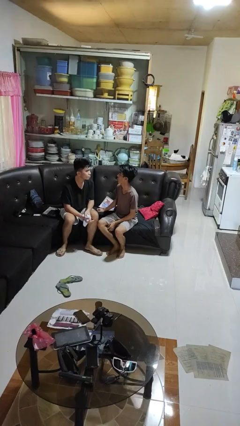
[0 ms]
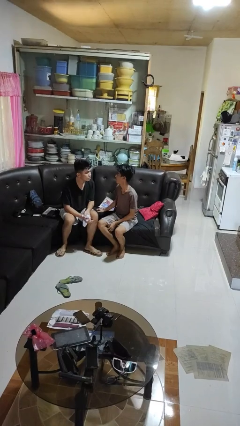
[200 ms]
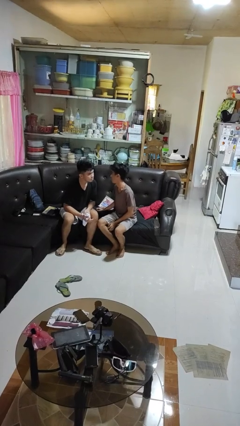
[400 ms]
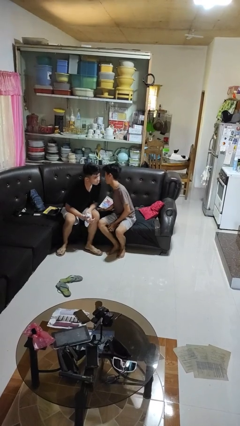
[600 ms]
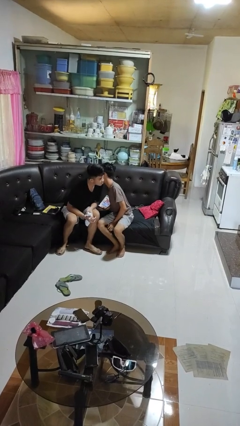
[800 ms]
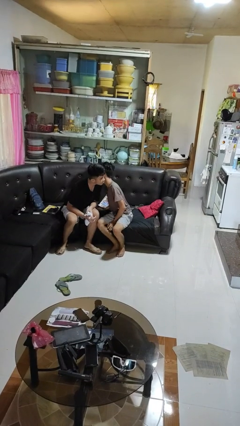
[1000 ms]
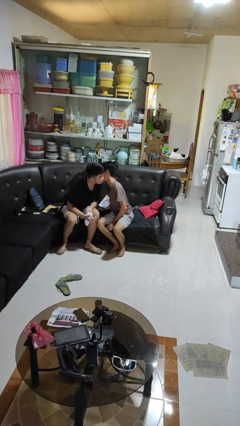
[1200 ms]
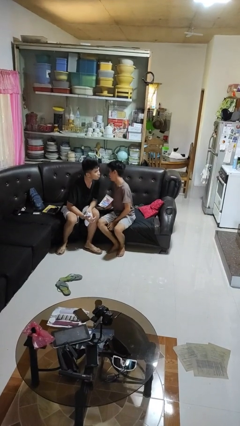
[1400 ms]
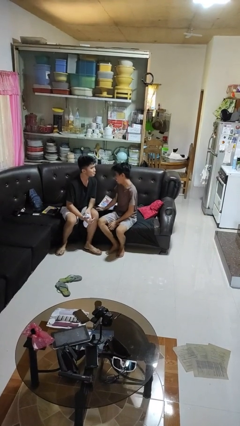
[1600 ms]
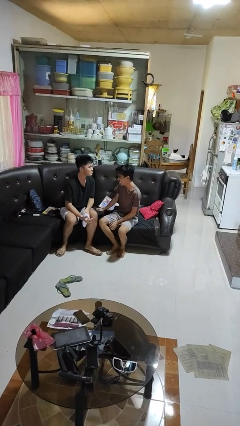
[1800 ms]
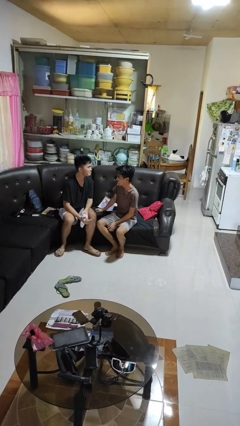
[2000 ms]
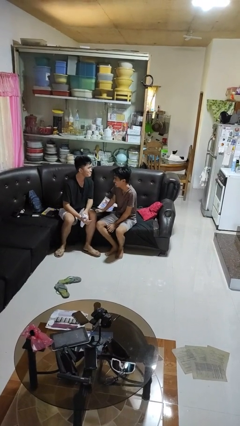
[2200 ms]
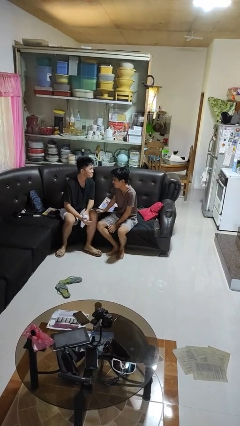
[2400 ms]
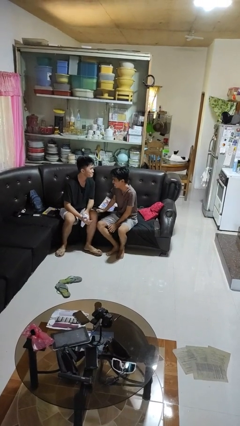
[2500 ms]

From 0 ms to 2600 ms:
person kisses cheek of person

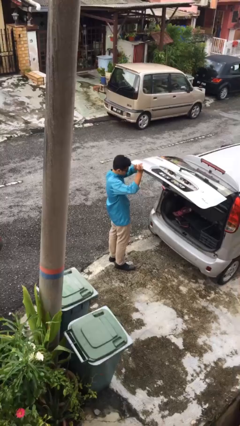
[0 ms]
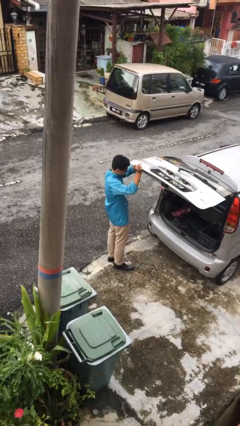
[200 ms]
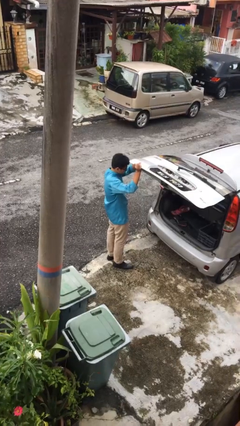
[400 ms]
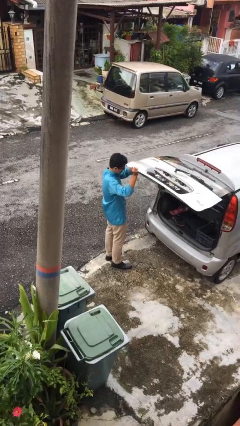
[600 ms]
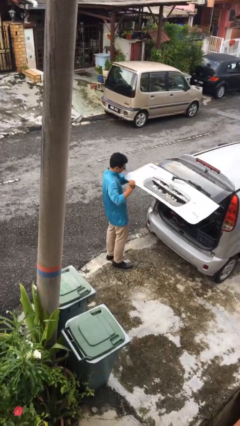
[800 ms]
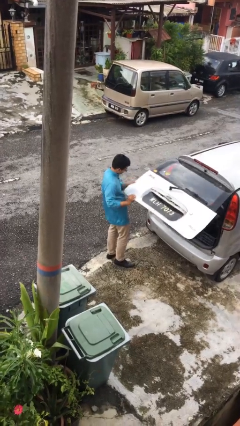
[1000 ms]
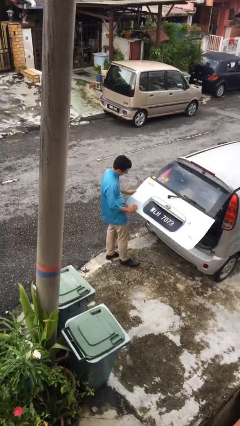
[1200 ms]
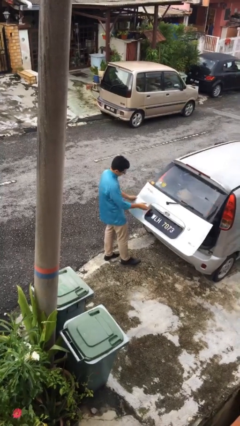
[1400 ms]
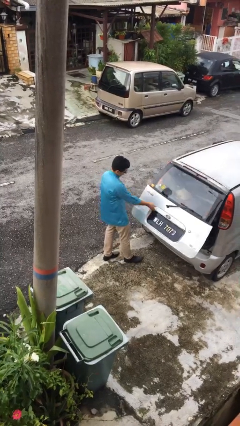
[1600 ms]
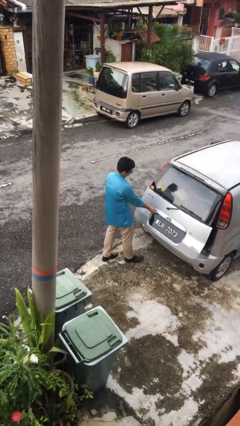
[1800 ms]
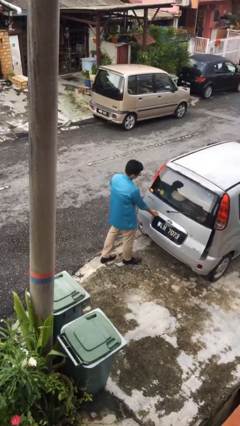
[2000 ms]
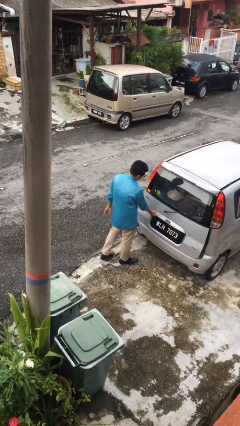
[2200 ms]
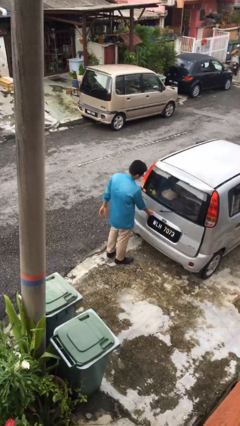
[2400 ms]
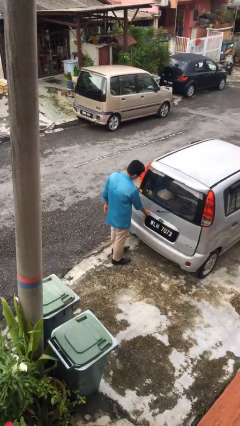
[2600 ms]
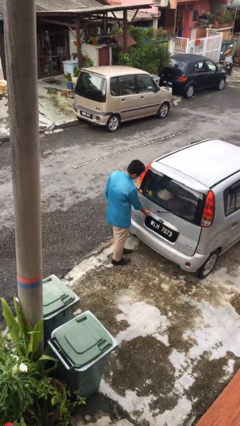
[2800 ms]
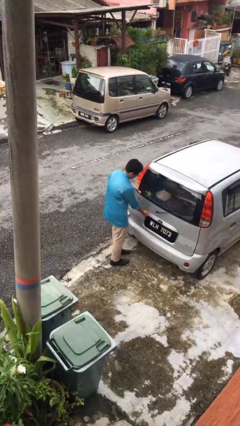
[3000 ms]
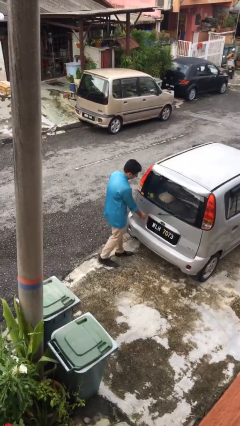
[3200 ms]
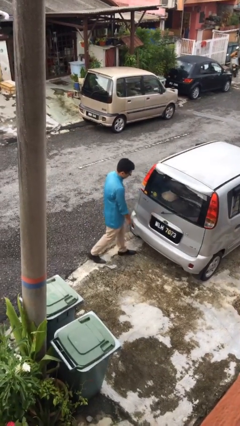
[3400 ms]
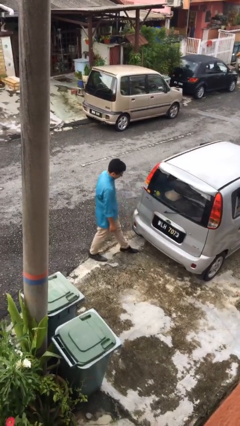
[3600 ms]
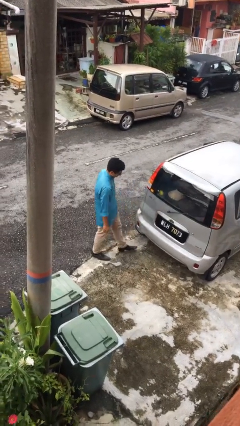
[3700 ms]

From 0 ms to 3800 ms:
person closes car trunk

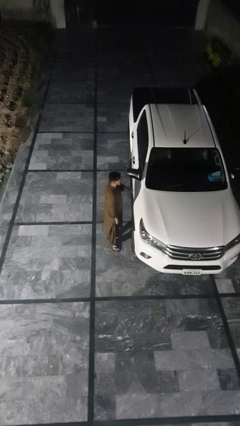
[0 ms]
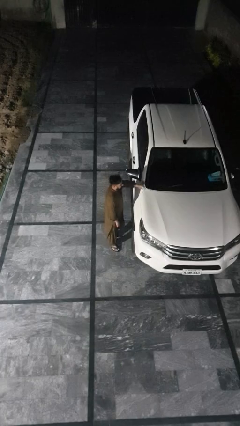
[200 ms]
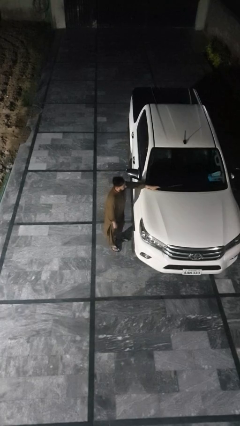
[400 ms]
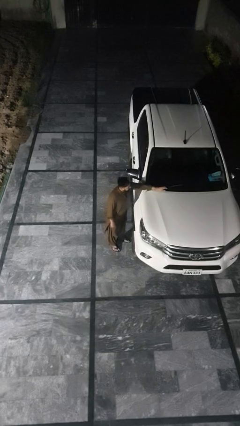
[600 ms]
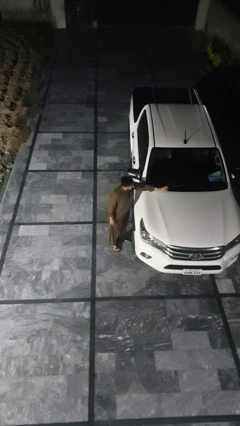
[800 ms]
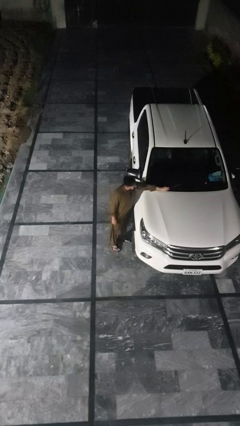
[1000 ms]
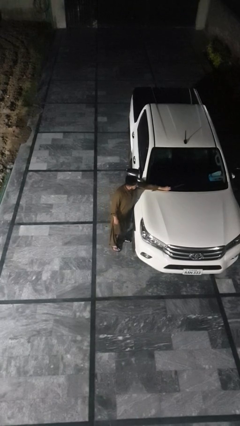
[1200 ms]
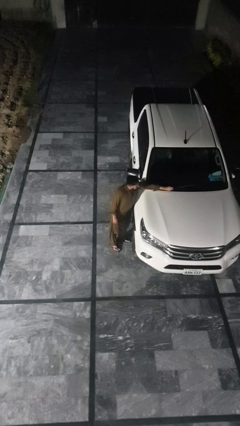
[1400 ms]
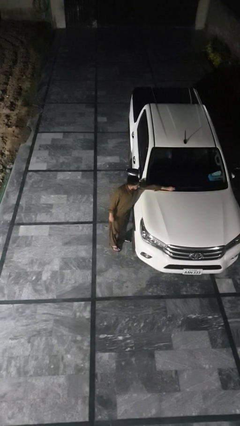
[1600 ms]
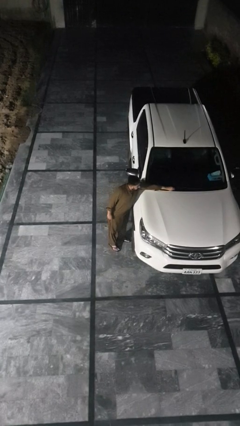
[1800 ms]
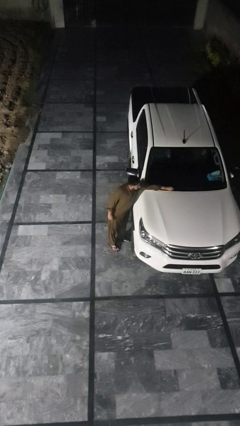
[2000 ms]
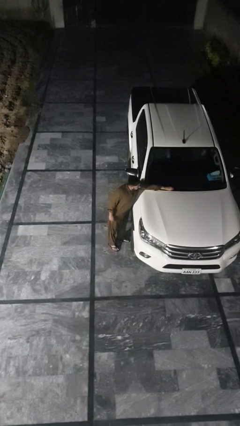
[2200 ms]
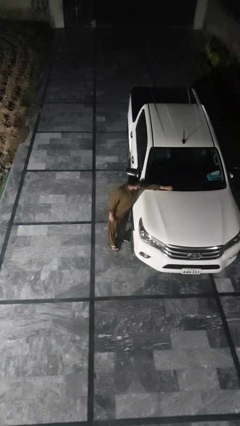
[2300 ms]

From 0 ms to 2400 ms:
person flips down car wipers

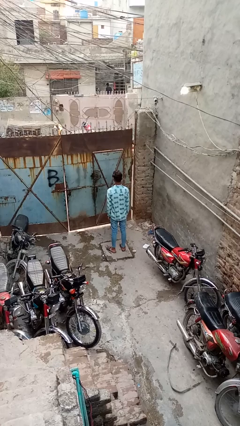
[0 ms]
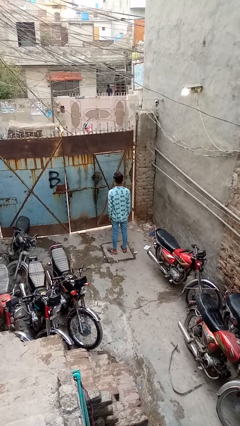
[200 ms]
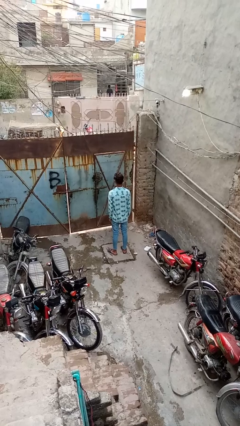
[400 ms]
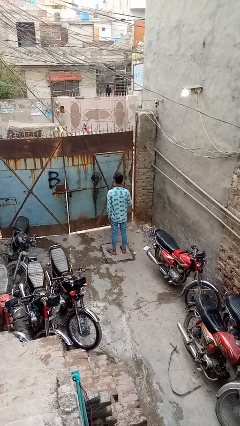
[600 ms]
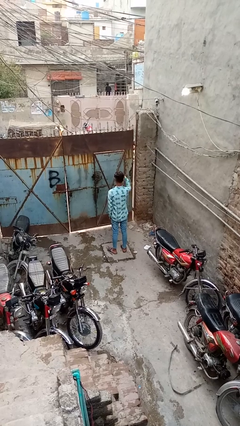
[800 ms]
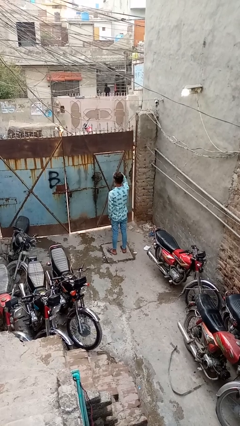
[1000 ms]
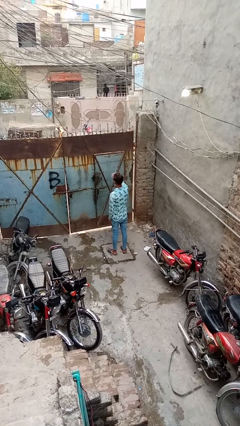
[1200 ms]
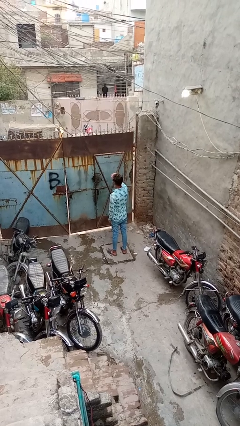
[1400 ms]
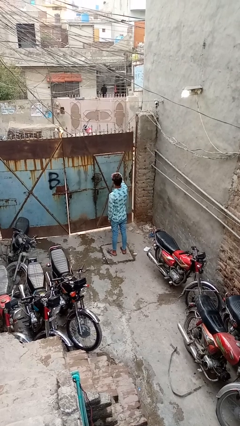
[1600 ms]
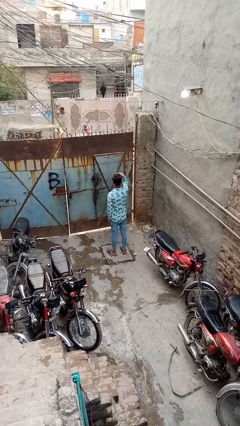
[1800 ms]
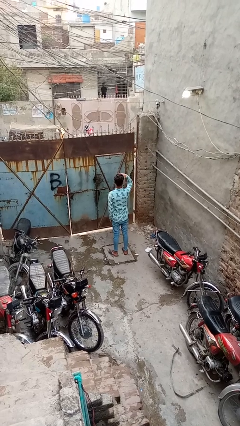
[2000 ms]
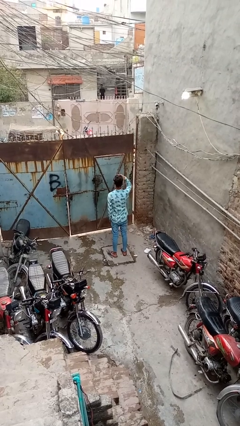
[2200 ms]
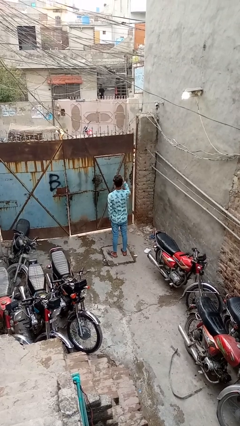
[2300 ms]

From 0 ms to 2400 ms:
person shades eyes

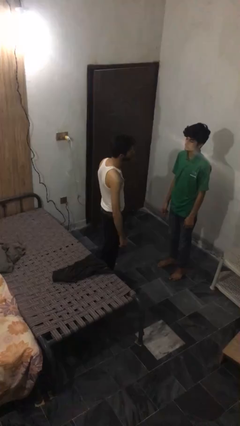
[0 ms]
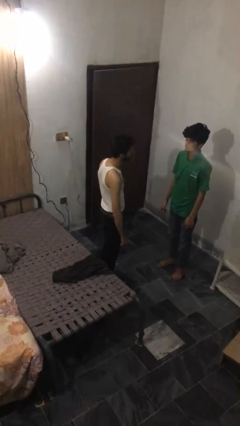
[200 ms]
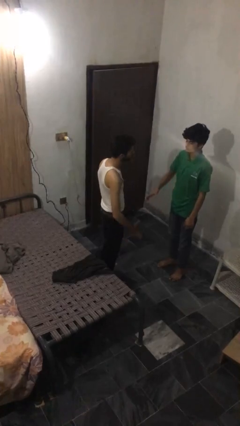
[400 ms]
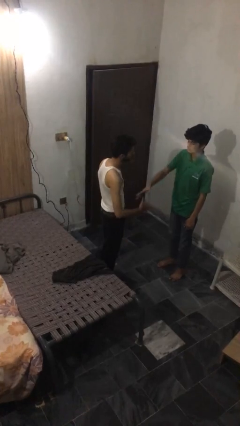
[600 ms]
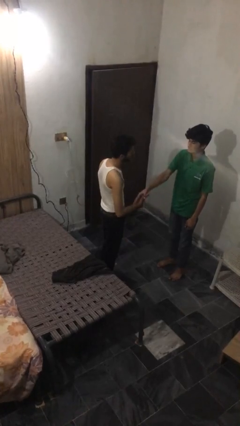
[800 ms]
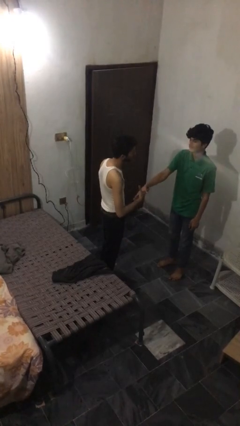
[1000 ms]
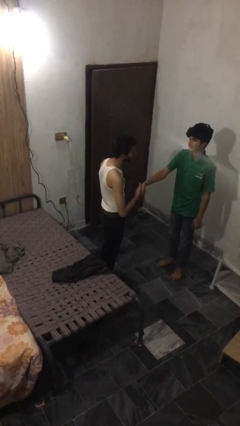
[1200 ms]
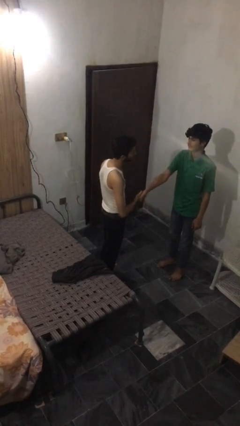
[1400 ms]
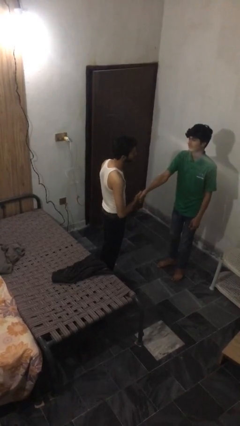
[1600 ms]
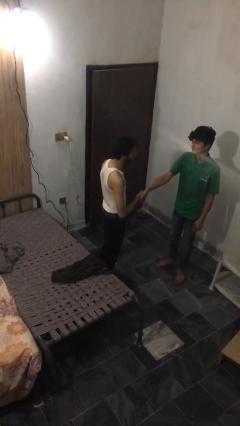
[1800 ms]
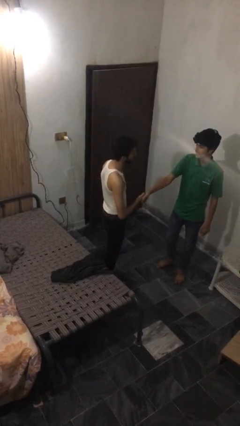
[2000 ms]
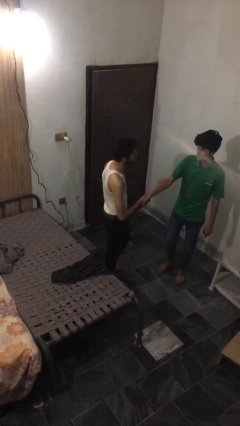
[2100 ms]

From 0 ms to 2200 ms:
person shakes hand

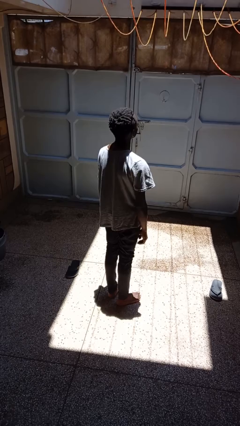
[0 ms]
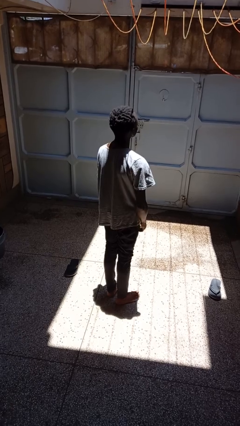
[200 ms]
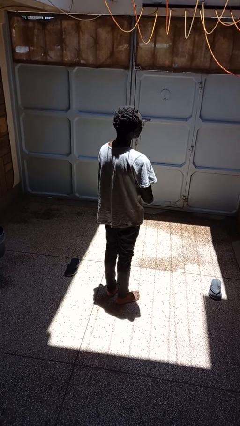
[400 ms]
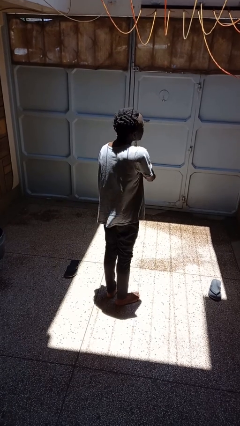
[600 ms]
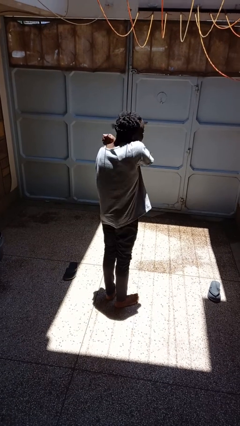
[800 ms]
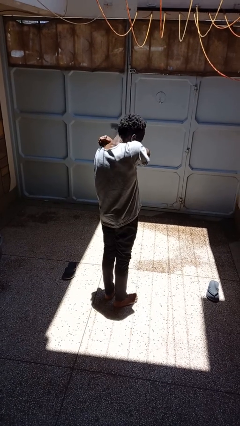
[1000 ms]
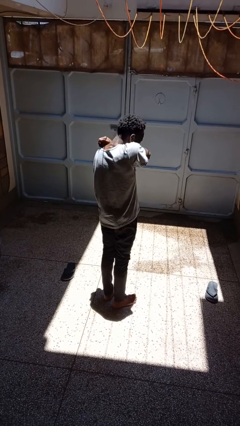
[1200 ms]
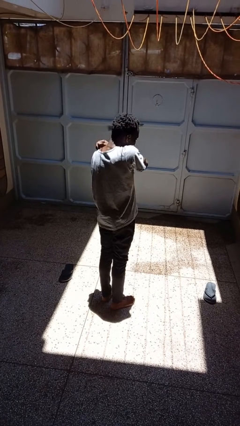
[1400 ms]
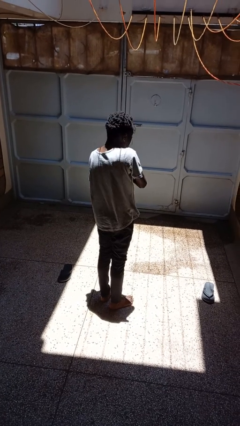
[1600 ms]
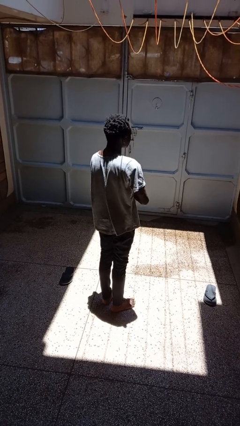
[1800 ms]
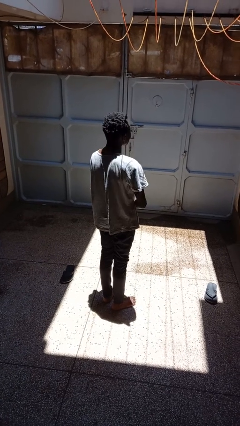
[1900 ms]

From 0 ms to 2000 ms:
person sneezes into arm

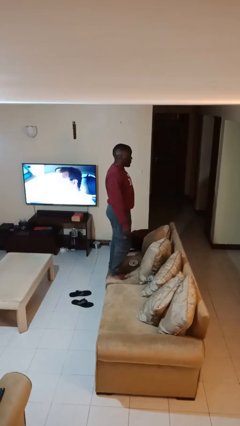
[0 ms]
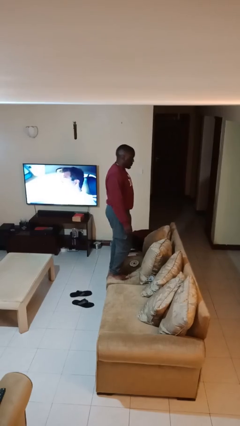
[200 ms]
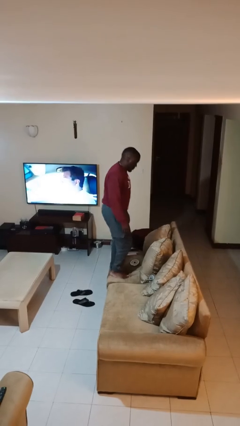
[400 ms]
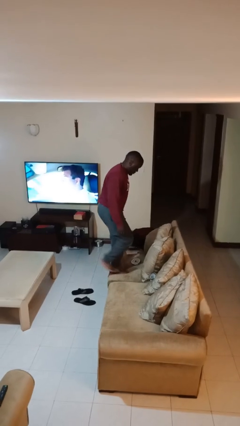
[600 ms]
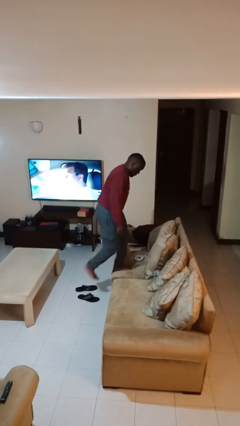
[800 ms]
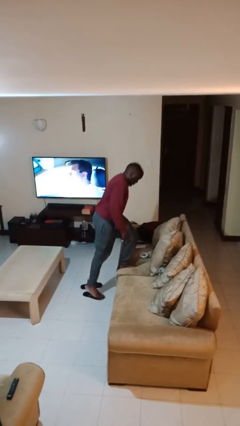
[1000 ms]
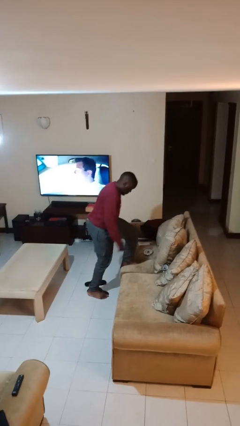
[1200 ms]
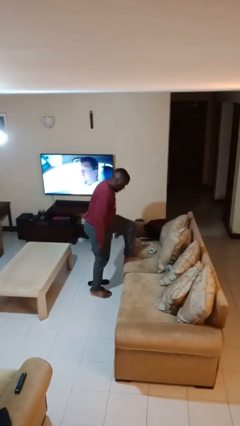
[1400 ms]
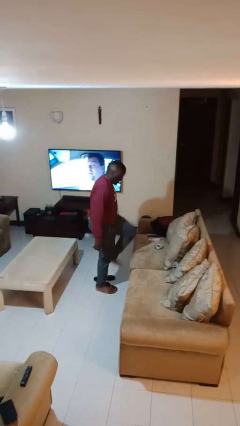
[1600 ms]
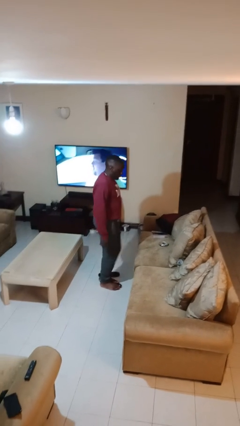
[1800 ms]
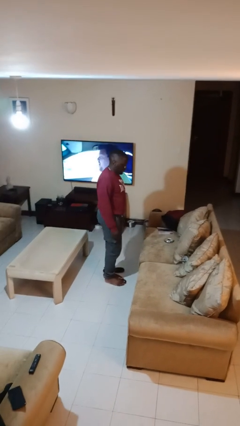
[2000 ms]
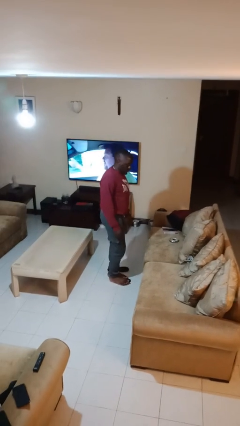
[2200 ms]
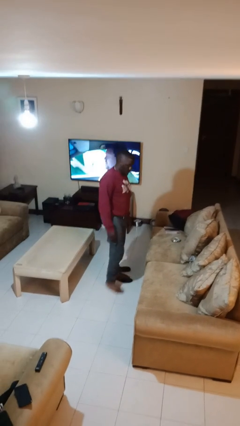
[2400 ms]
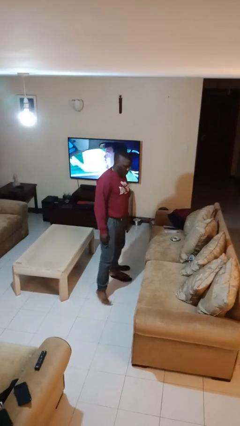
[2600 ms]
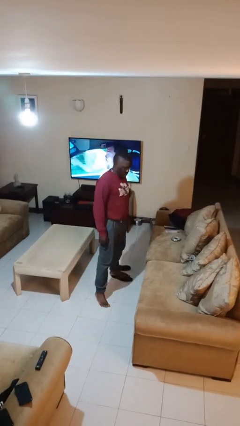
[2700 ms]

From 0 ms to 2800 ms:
person climbs off couch
